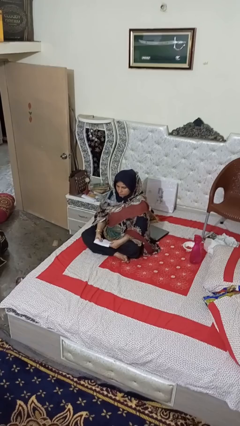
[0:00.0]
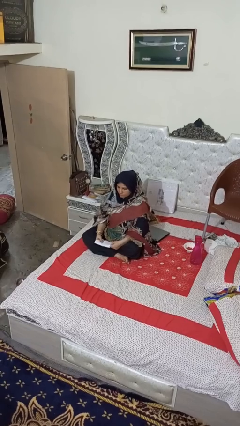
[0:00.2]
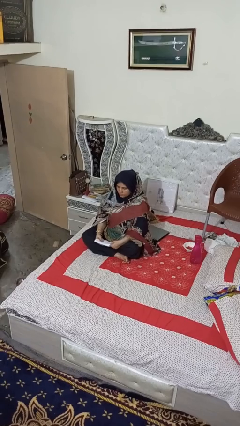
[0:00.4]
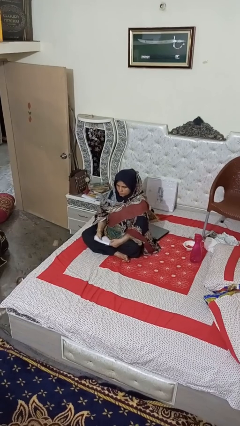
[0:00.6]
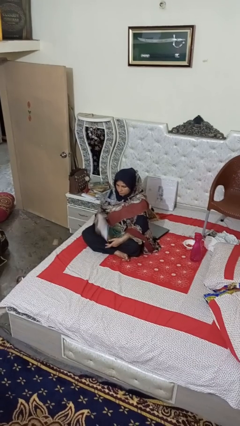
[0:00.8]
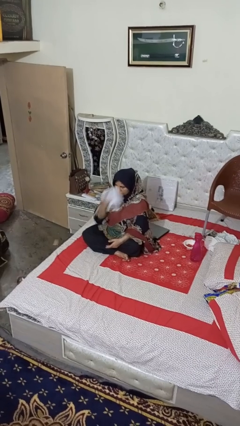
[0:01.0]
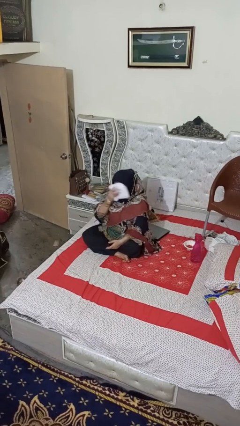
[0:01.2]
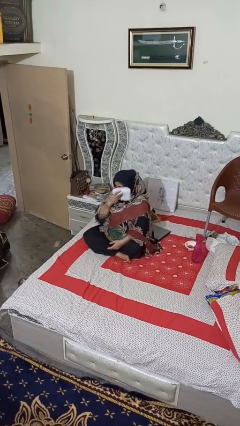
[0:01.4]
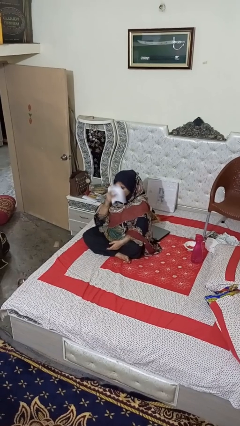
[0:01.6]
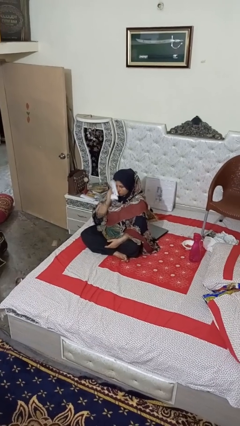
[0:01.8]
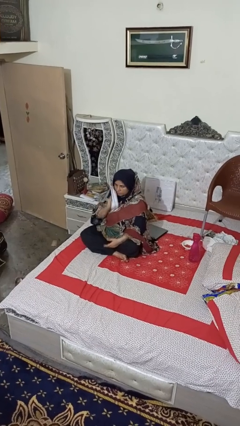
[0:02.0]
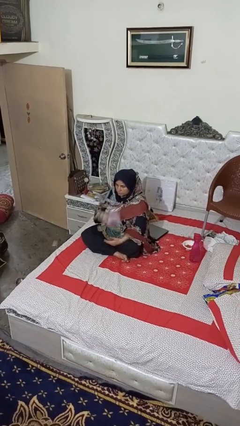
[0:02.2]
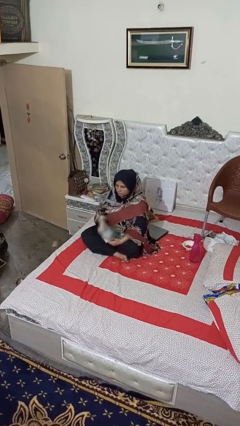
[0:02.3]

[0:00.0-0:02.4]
person wipes mouth with napkin

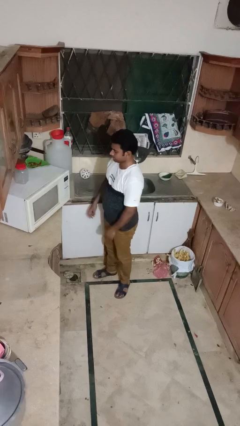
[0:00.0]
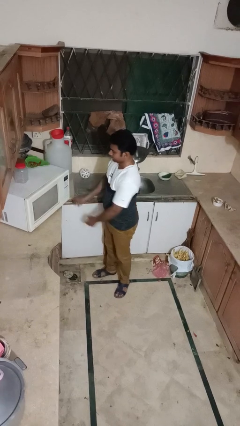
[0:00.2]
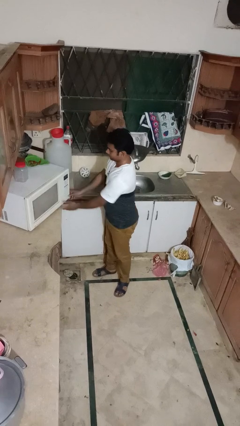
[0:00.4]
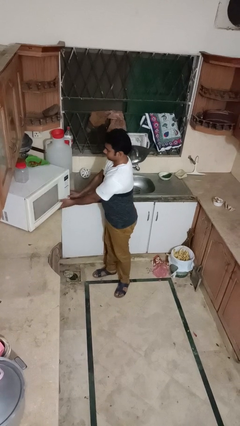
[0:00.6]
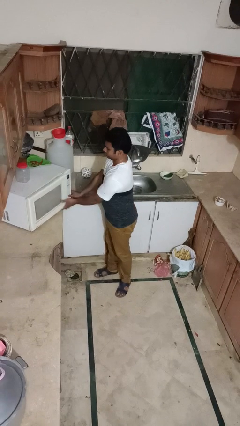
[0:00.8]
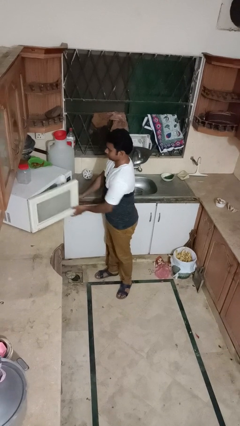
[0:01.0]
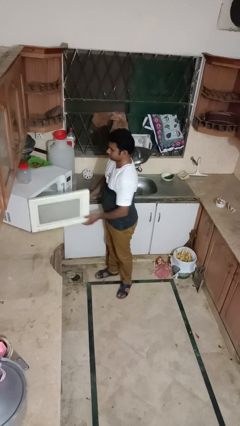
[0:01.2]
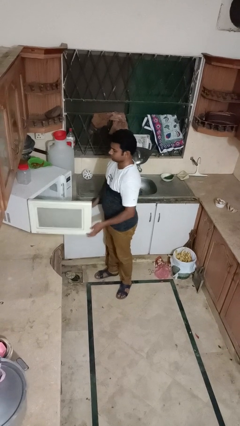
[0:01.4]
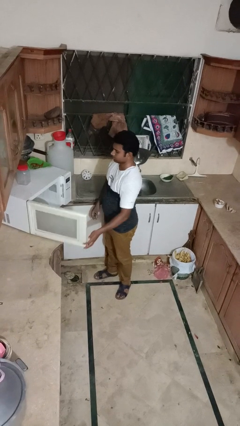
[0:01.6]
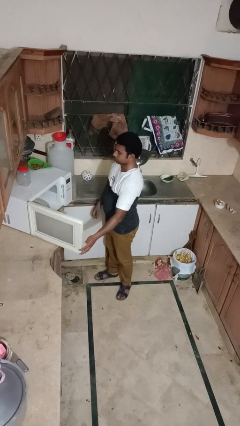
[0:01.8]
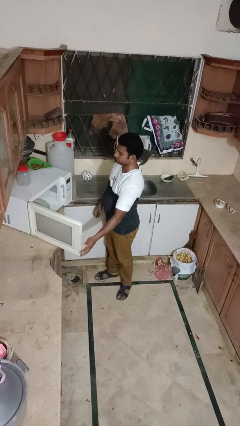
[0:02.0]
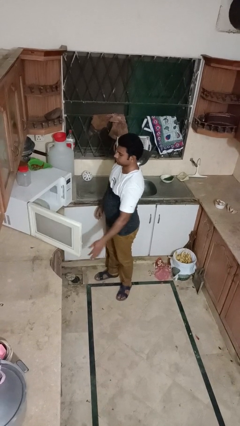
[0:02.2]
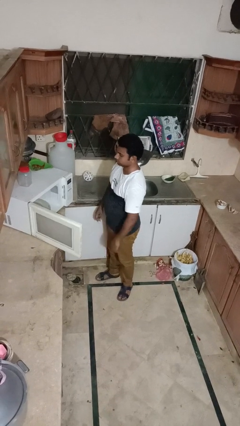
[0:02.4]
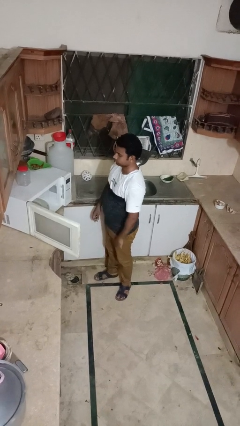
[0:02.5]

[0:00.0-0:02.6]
person opens oven door

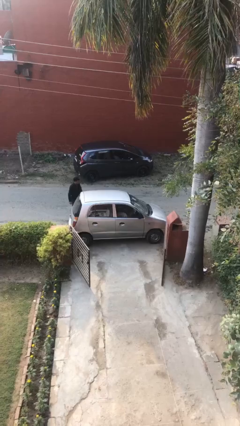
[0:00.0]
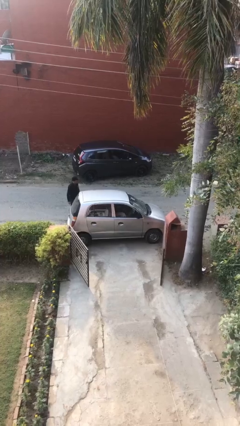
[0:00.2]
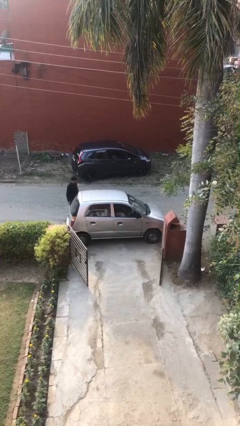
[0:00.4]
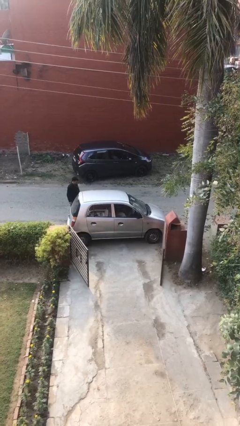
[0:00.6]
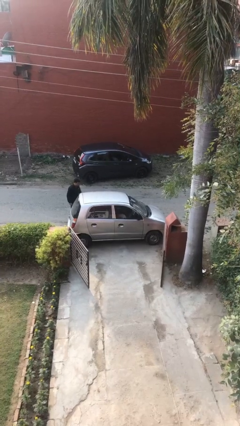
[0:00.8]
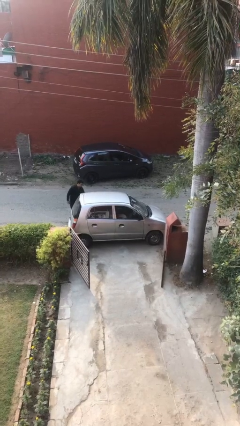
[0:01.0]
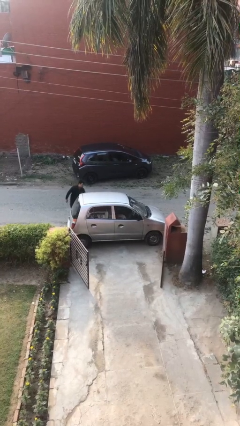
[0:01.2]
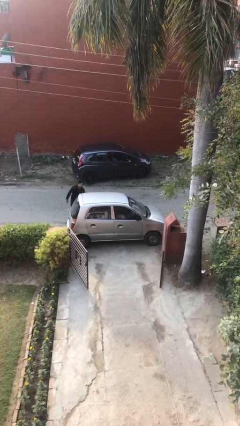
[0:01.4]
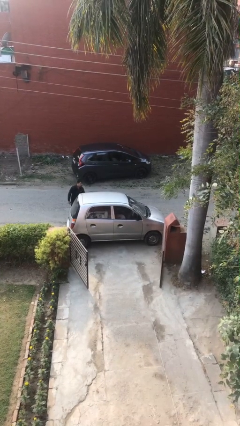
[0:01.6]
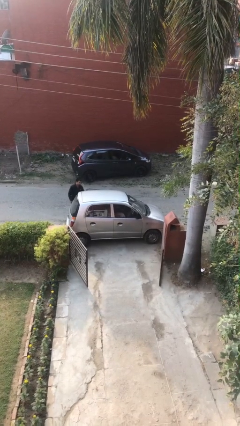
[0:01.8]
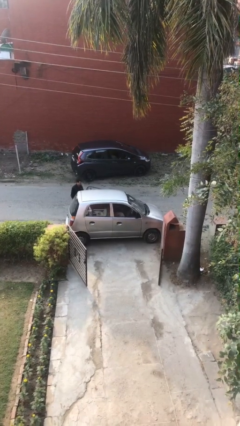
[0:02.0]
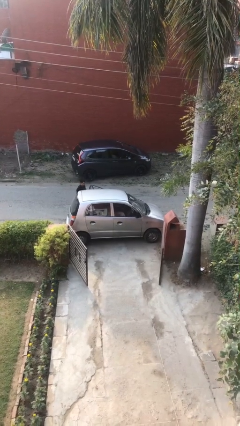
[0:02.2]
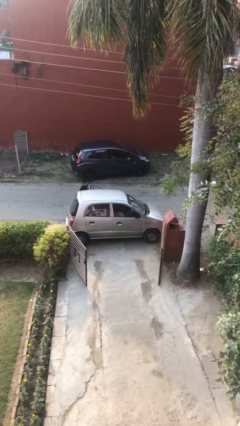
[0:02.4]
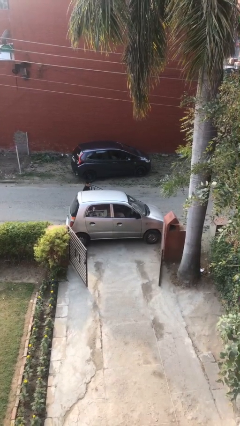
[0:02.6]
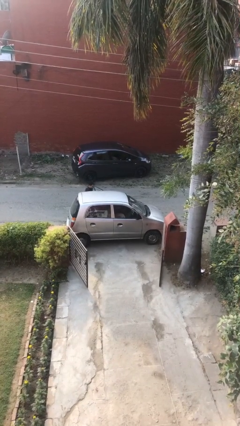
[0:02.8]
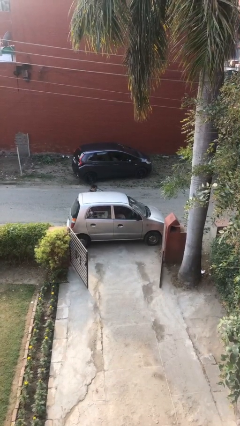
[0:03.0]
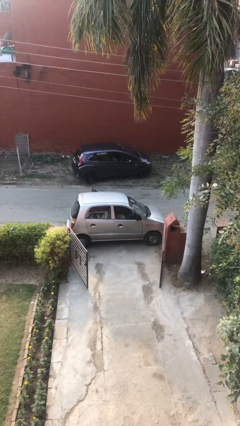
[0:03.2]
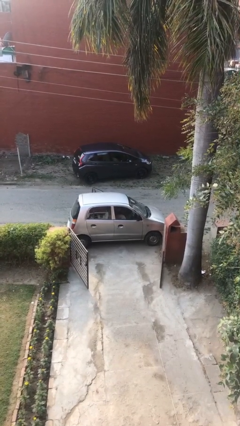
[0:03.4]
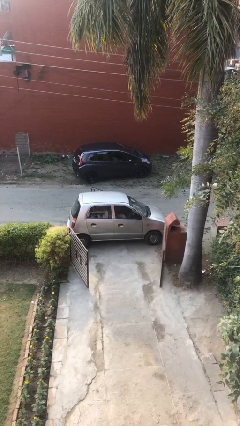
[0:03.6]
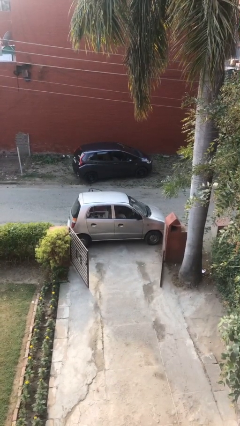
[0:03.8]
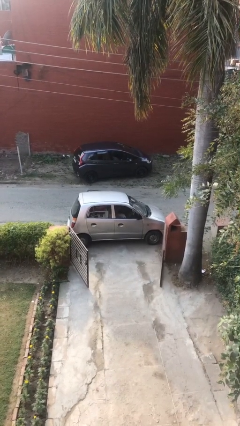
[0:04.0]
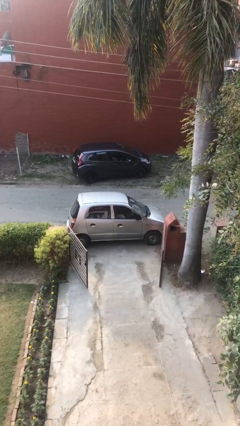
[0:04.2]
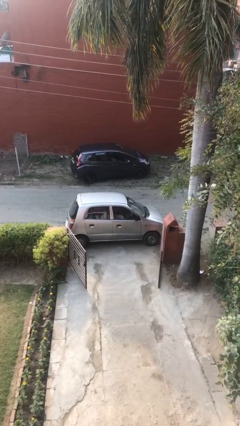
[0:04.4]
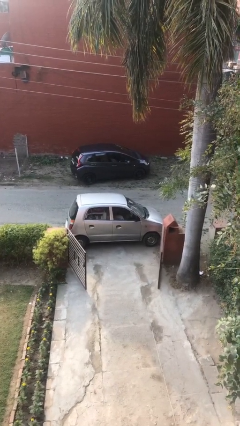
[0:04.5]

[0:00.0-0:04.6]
car picks up person

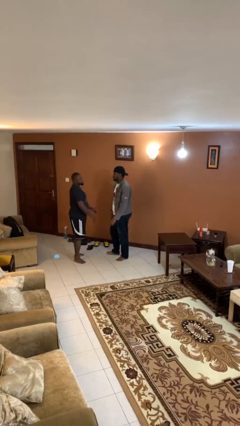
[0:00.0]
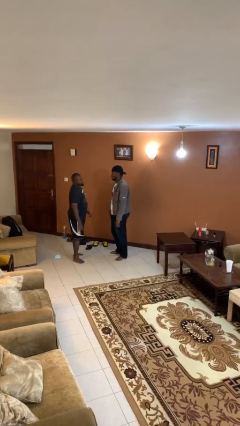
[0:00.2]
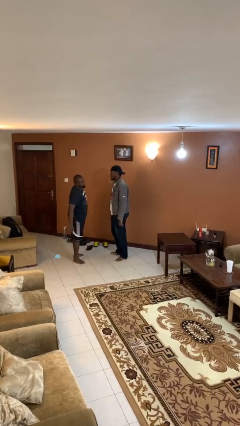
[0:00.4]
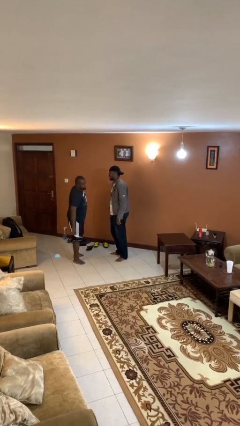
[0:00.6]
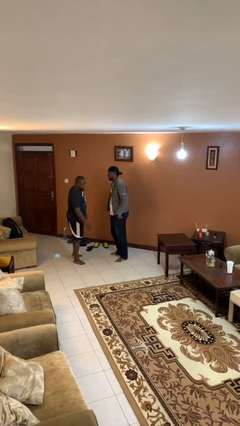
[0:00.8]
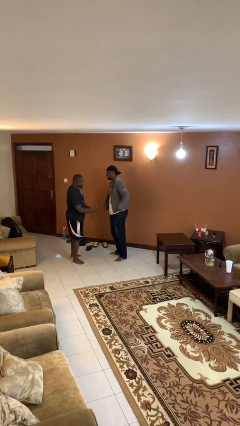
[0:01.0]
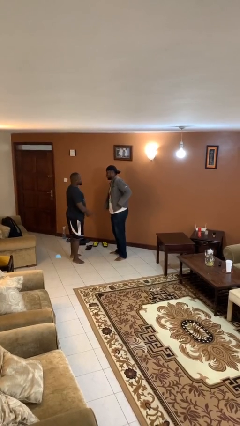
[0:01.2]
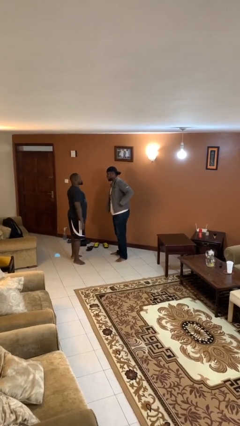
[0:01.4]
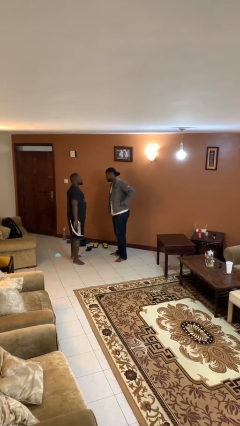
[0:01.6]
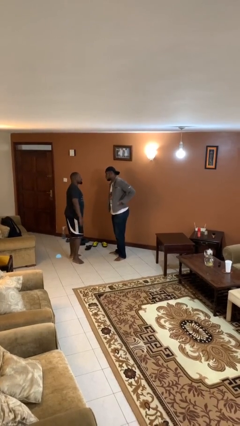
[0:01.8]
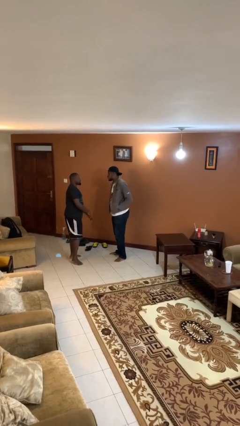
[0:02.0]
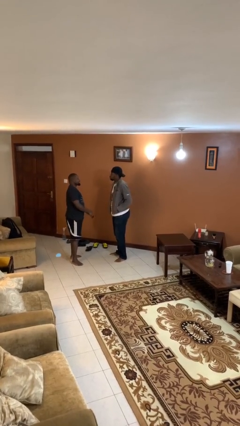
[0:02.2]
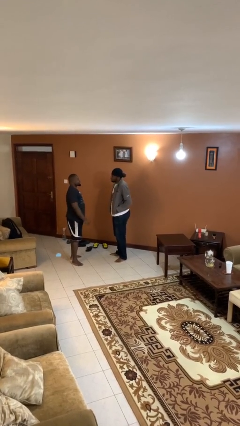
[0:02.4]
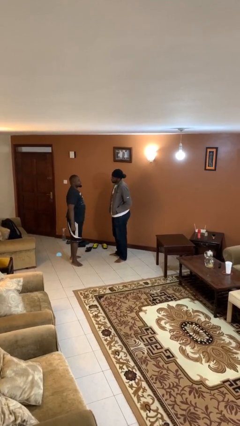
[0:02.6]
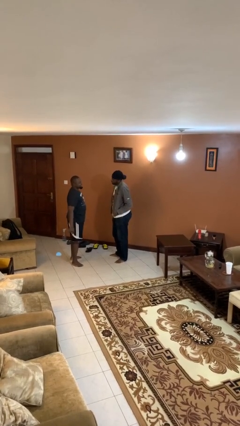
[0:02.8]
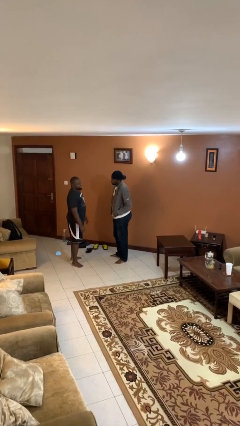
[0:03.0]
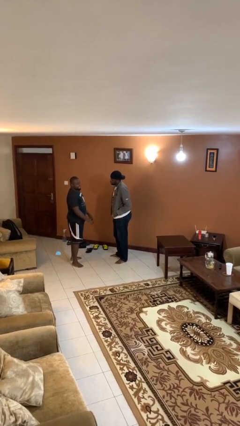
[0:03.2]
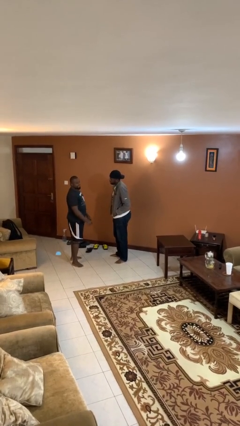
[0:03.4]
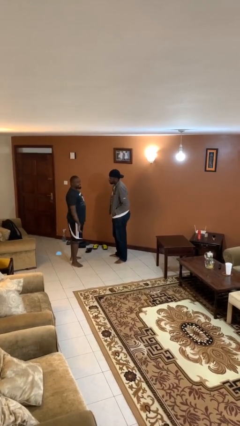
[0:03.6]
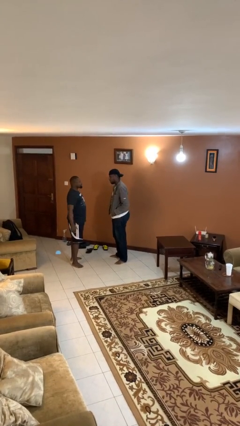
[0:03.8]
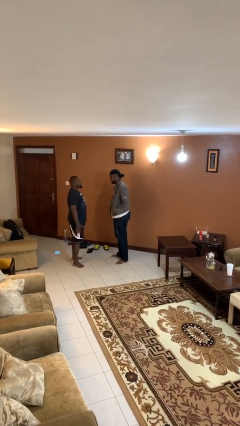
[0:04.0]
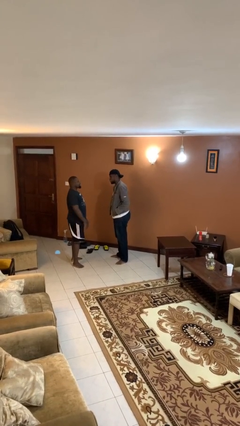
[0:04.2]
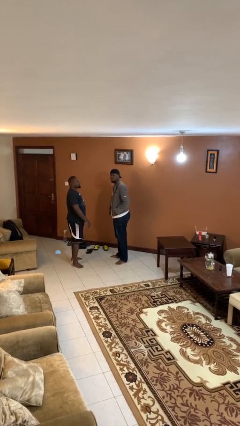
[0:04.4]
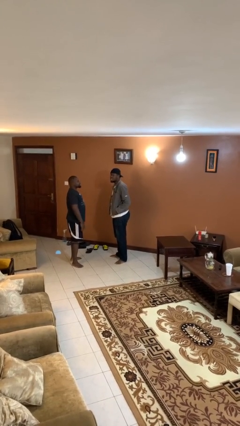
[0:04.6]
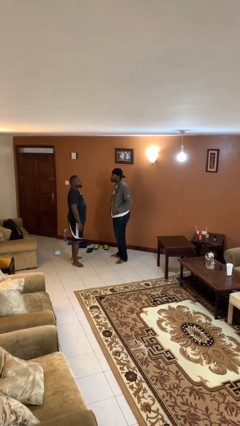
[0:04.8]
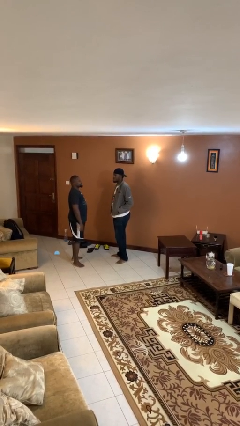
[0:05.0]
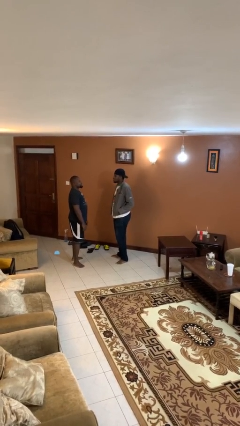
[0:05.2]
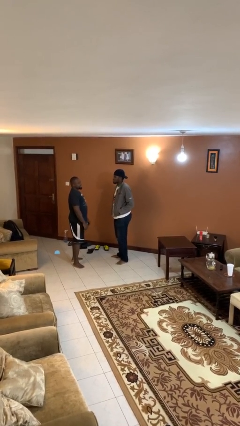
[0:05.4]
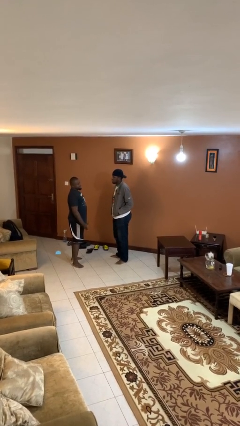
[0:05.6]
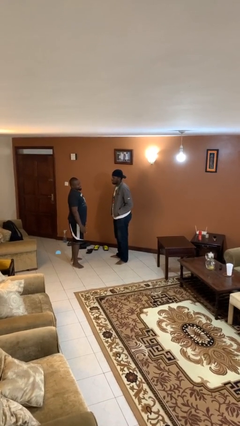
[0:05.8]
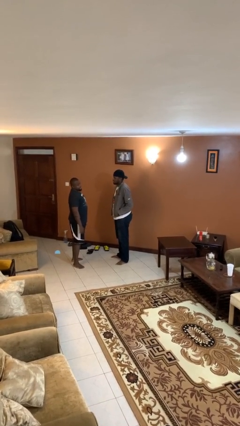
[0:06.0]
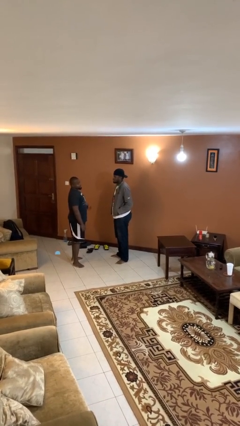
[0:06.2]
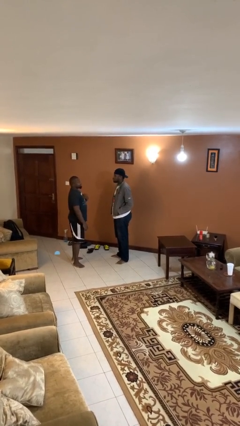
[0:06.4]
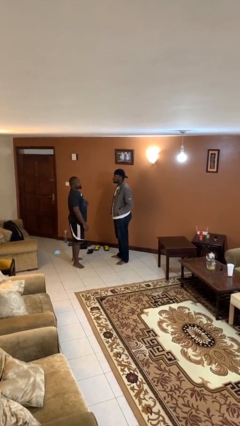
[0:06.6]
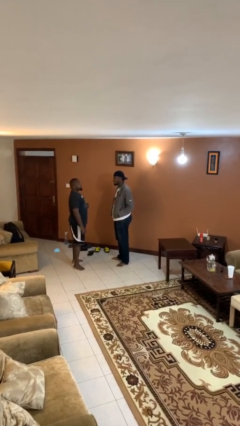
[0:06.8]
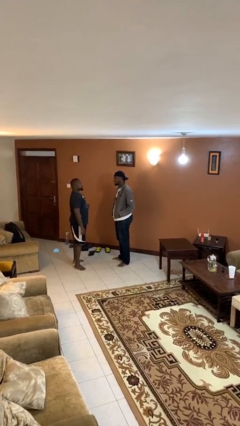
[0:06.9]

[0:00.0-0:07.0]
person talks to person

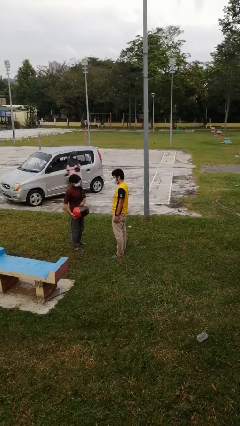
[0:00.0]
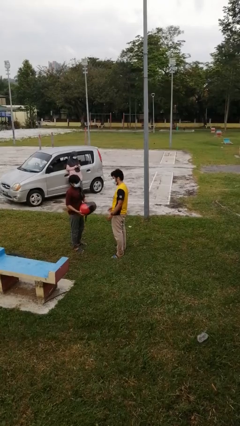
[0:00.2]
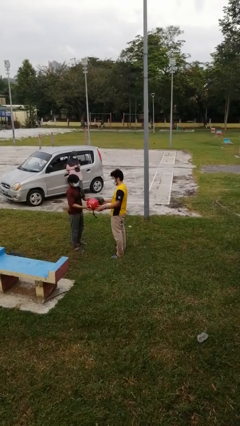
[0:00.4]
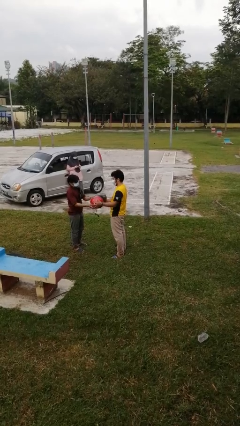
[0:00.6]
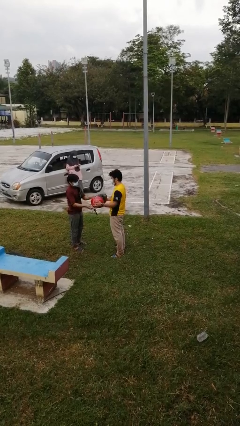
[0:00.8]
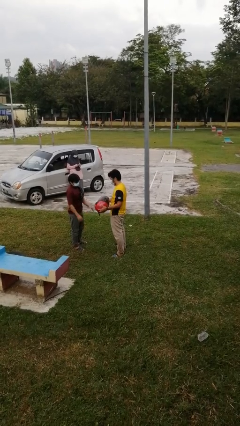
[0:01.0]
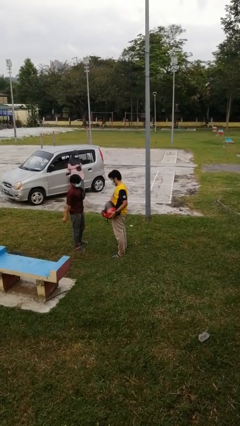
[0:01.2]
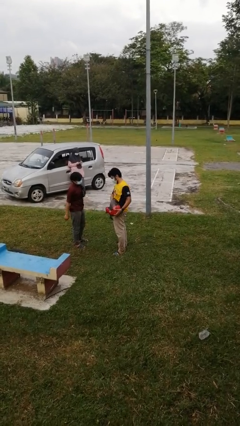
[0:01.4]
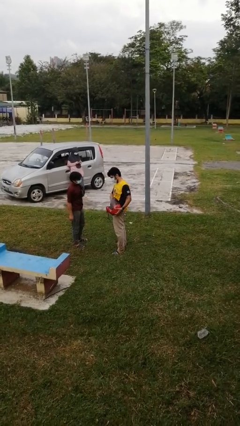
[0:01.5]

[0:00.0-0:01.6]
person transfers object to person
